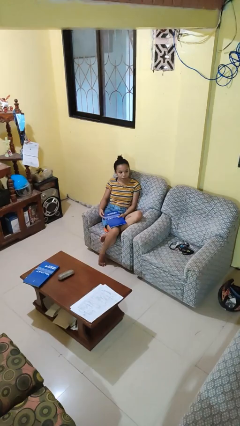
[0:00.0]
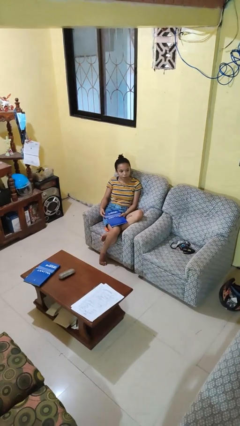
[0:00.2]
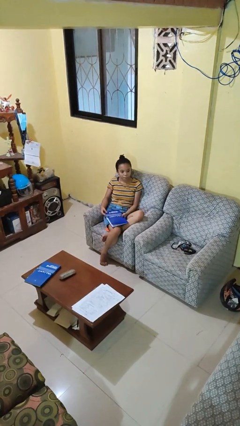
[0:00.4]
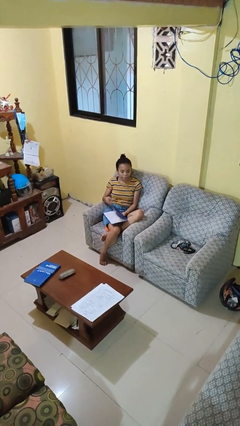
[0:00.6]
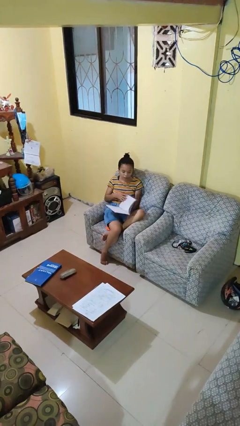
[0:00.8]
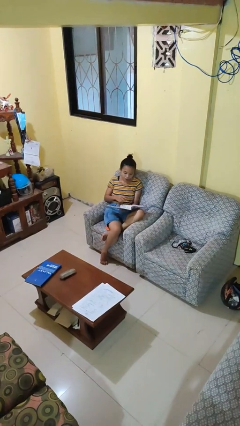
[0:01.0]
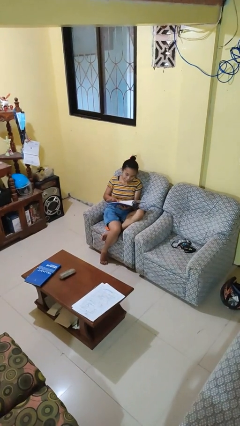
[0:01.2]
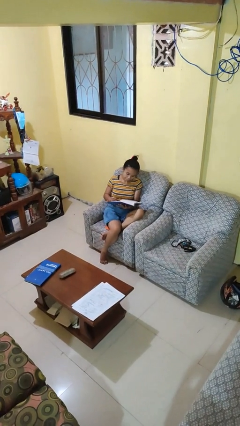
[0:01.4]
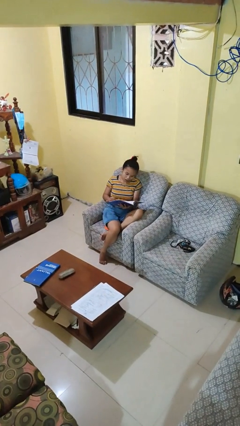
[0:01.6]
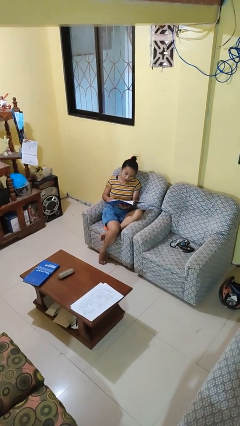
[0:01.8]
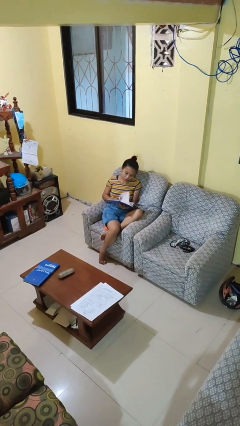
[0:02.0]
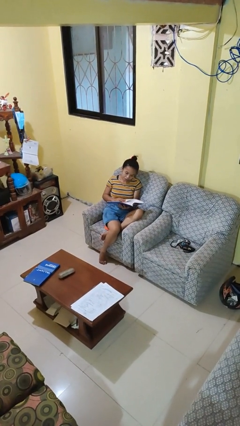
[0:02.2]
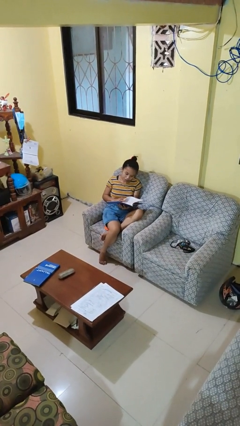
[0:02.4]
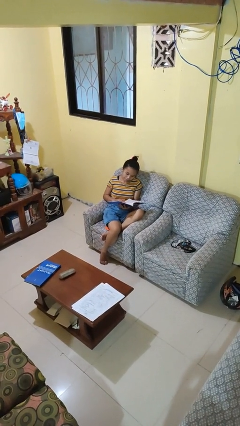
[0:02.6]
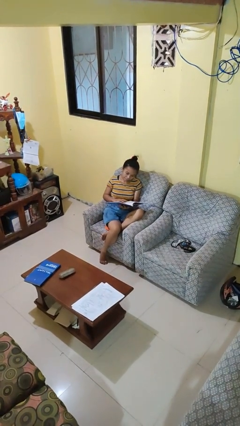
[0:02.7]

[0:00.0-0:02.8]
person reads book

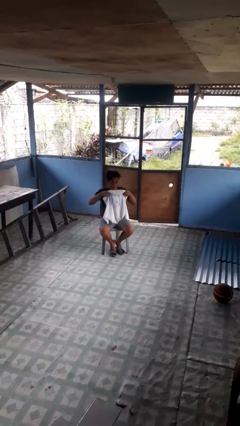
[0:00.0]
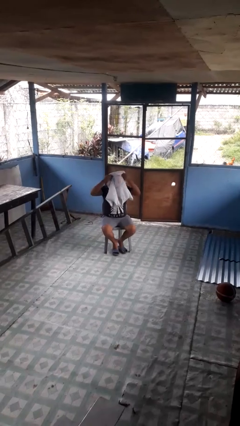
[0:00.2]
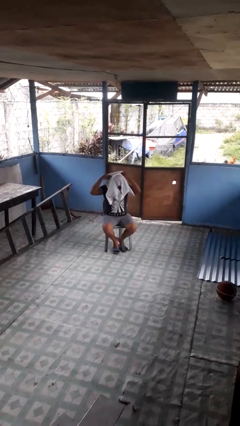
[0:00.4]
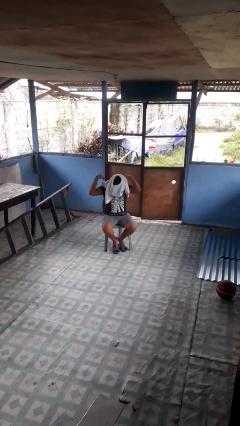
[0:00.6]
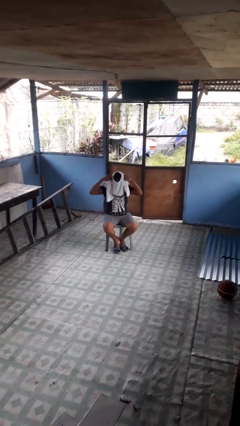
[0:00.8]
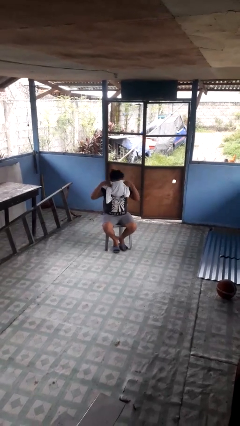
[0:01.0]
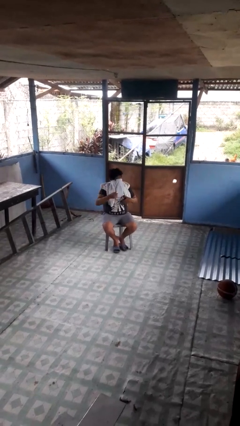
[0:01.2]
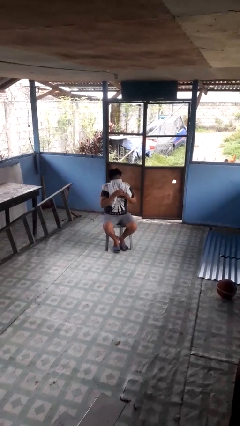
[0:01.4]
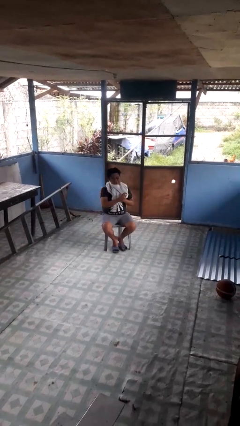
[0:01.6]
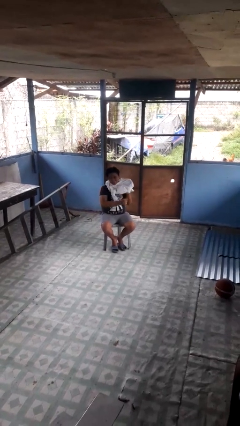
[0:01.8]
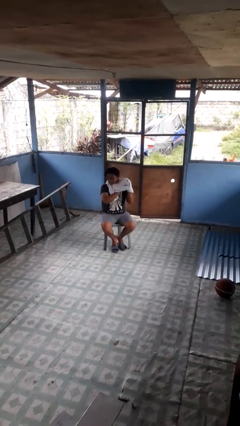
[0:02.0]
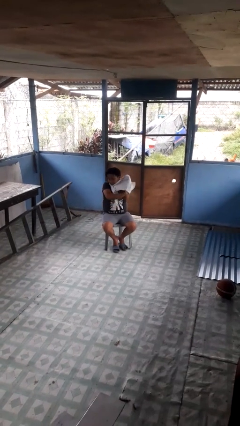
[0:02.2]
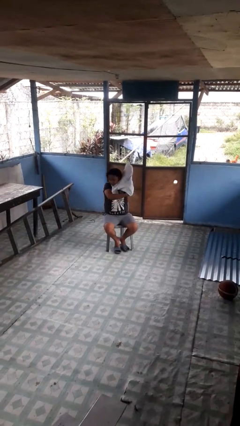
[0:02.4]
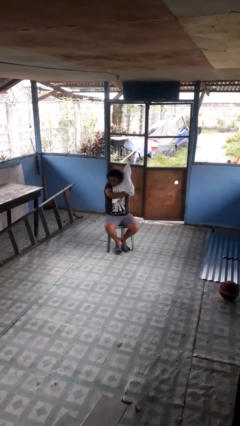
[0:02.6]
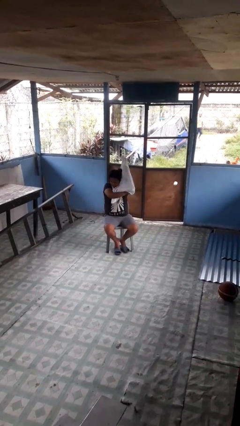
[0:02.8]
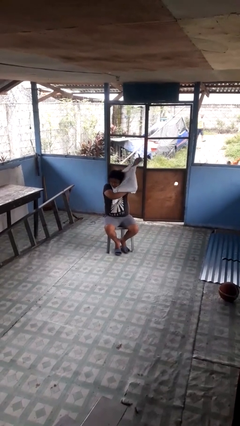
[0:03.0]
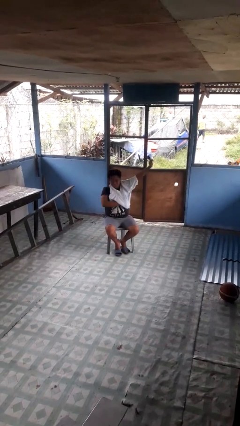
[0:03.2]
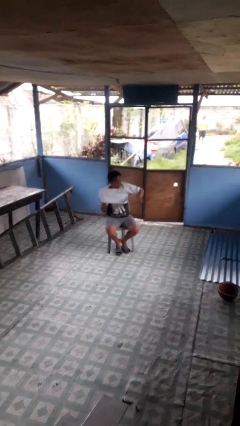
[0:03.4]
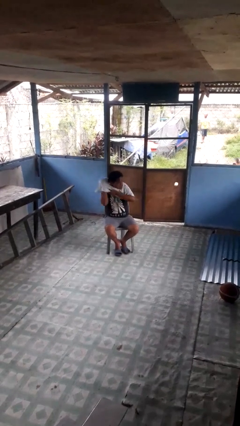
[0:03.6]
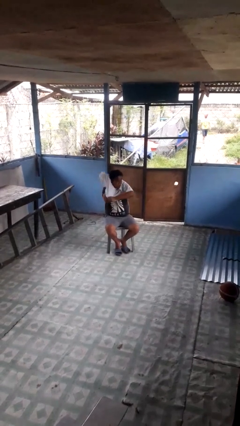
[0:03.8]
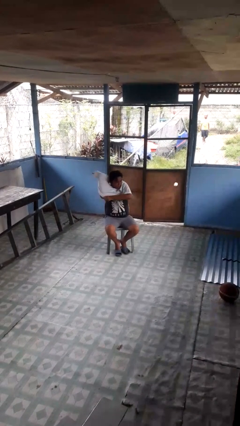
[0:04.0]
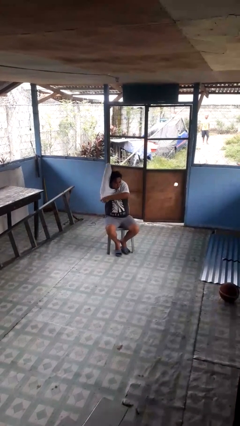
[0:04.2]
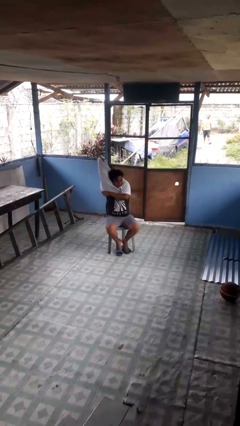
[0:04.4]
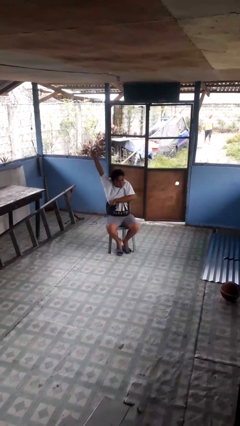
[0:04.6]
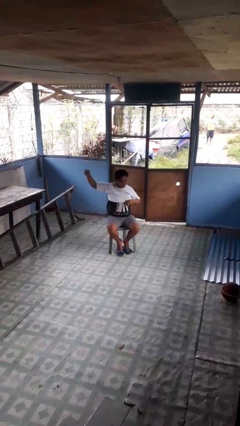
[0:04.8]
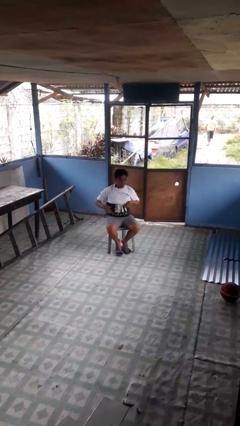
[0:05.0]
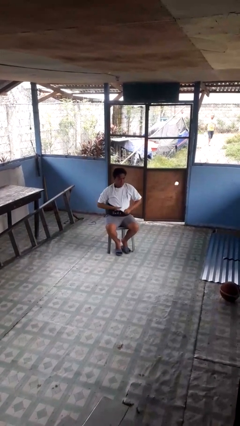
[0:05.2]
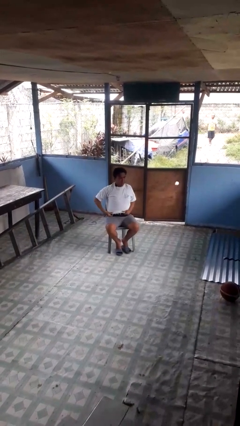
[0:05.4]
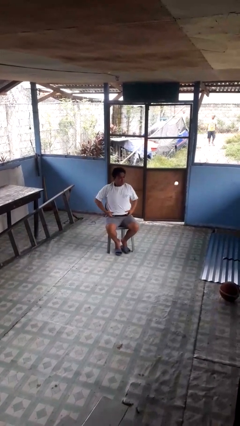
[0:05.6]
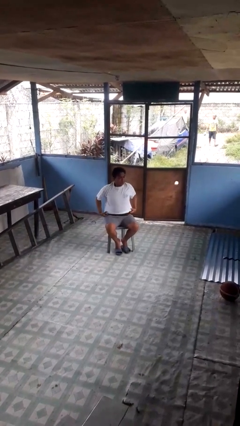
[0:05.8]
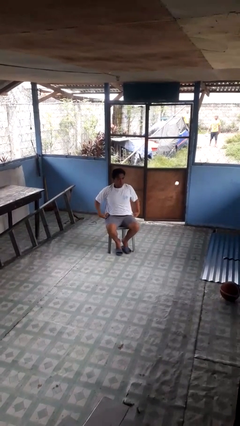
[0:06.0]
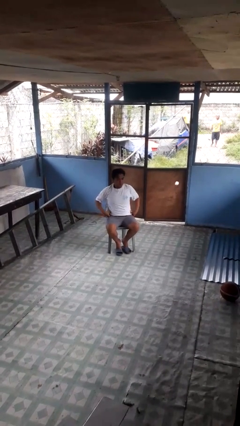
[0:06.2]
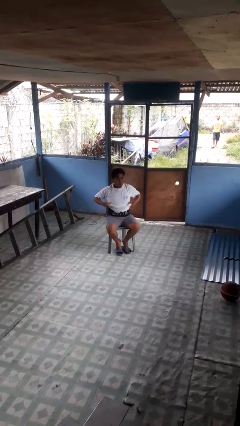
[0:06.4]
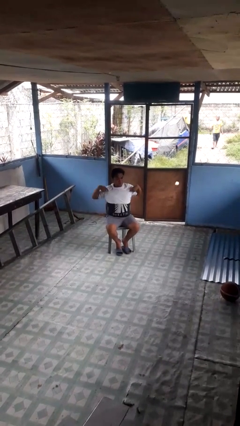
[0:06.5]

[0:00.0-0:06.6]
person puts on shirt

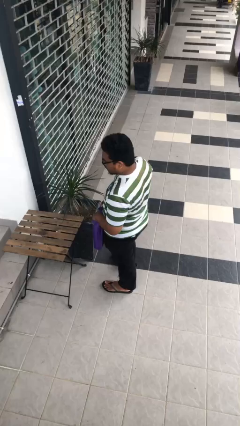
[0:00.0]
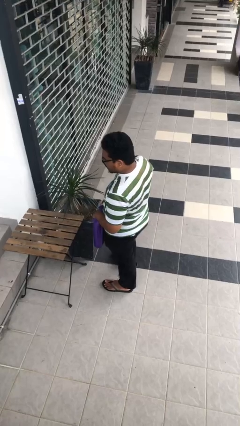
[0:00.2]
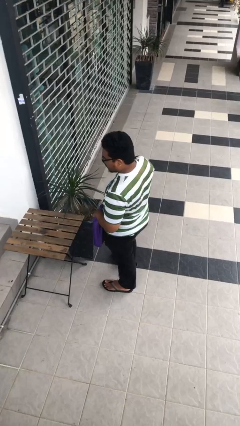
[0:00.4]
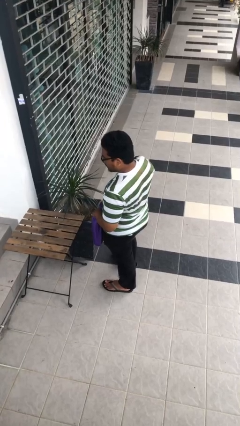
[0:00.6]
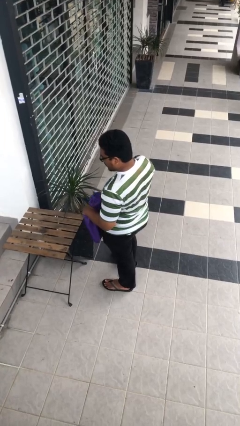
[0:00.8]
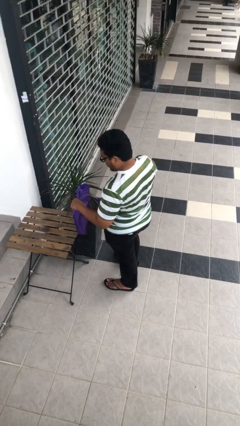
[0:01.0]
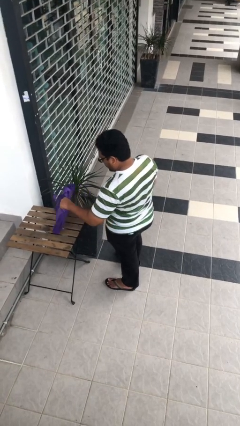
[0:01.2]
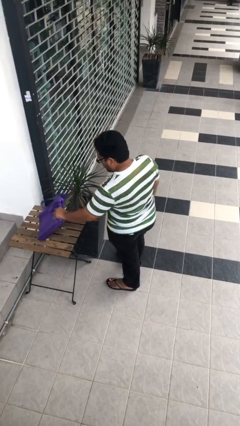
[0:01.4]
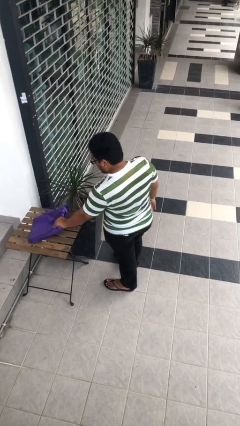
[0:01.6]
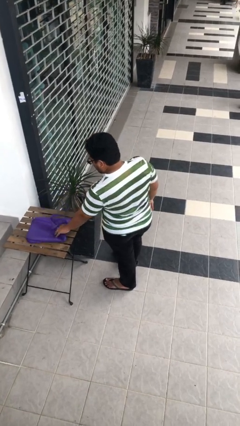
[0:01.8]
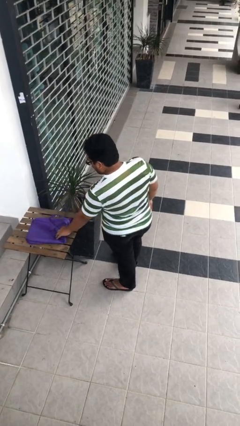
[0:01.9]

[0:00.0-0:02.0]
person puts down object on table

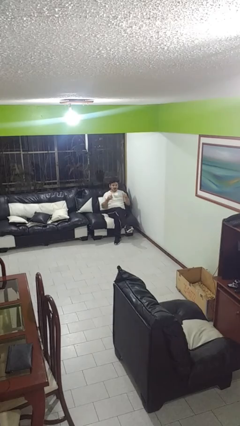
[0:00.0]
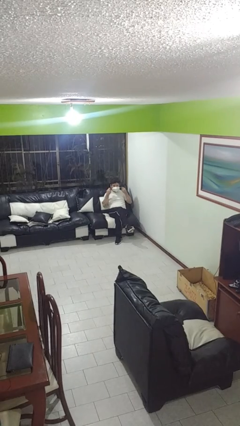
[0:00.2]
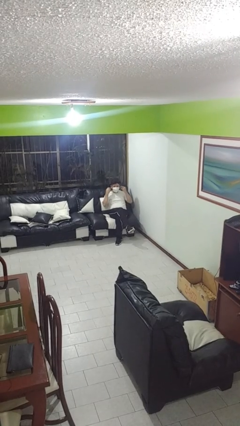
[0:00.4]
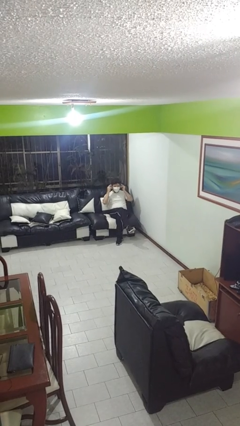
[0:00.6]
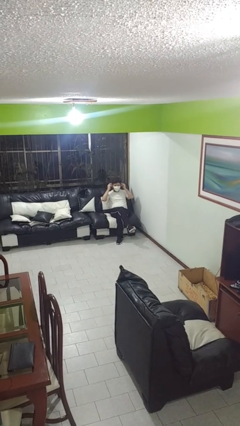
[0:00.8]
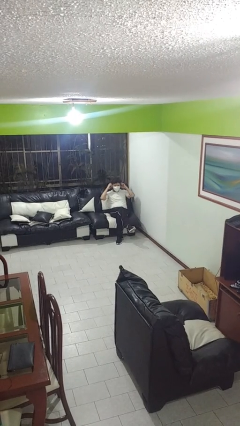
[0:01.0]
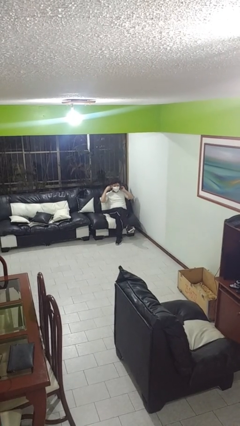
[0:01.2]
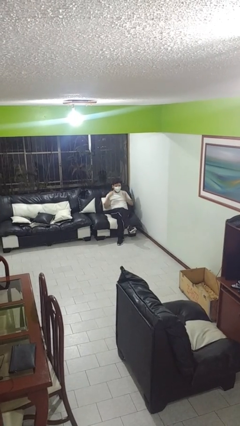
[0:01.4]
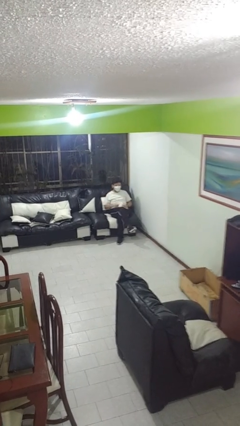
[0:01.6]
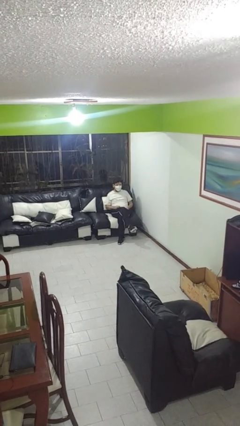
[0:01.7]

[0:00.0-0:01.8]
person puts on facemask

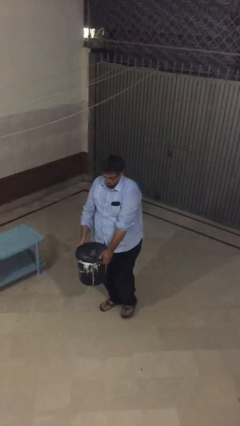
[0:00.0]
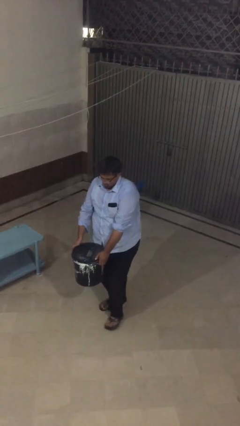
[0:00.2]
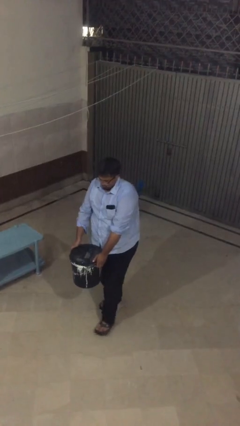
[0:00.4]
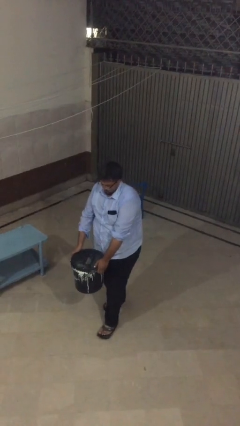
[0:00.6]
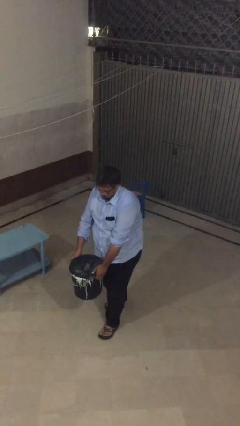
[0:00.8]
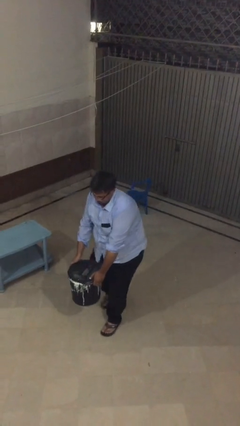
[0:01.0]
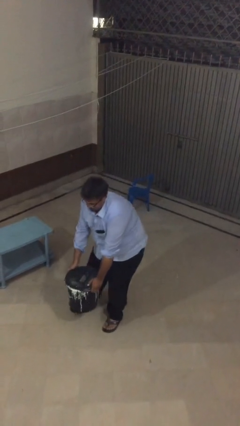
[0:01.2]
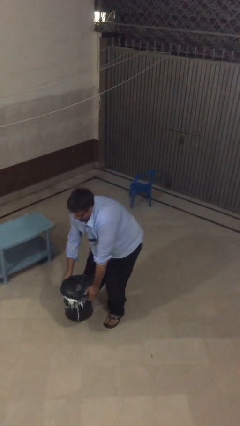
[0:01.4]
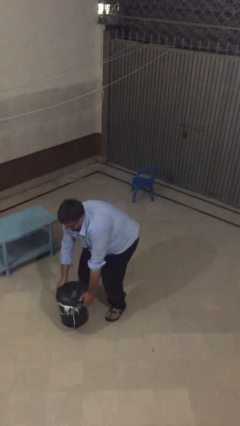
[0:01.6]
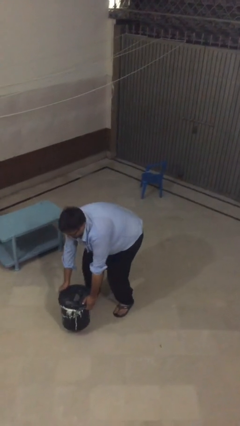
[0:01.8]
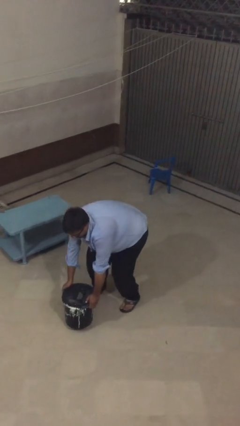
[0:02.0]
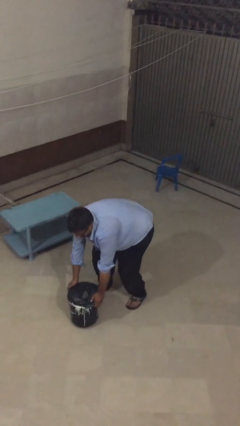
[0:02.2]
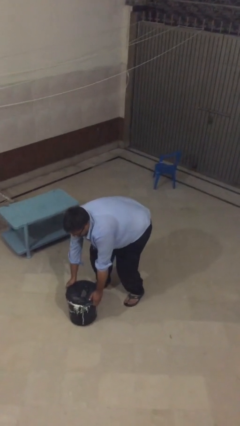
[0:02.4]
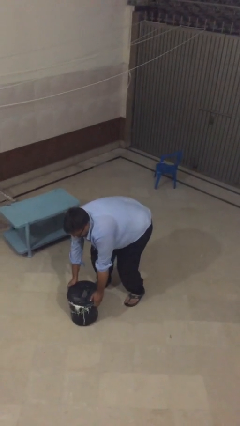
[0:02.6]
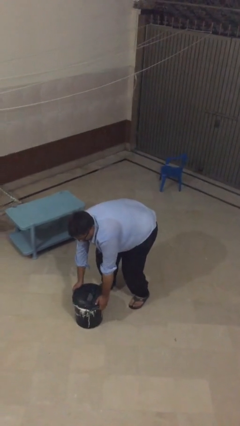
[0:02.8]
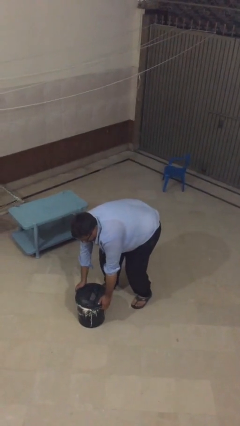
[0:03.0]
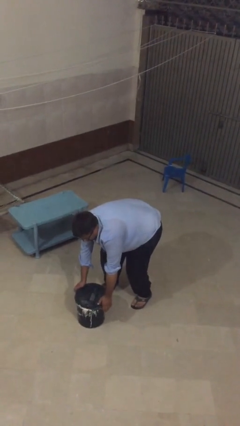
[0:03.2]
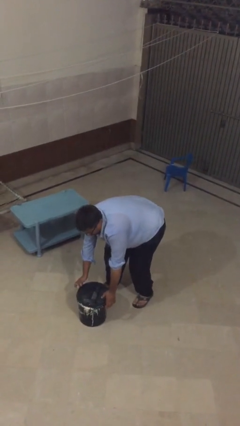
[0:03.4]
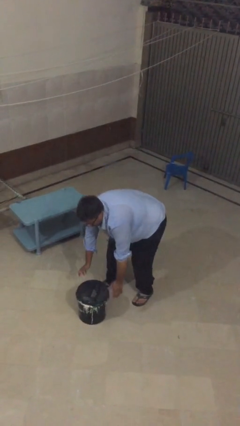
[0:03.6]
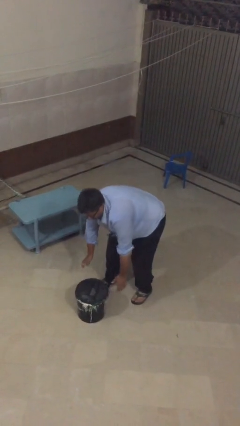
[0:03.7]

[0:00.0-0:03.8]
person puts down object on floor

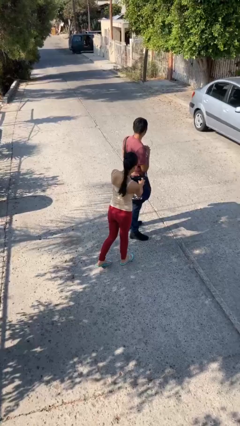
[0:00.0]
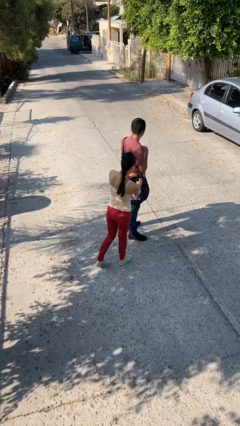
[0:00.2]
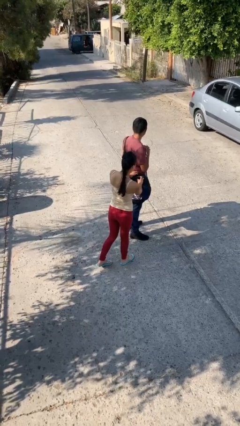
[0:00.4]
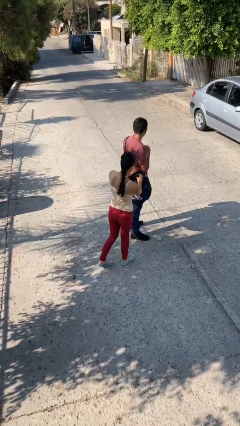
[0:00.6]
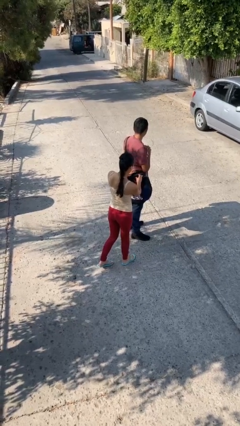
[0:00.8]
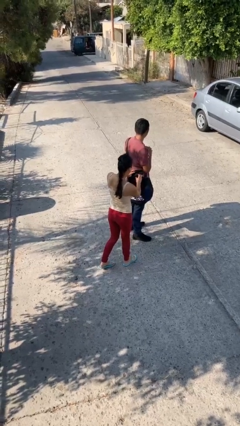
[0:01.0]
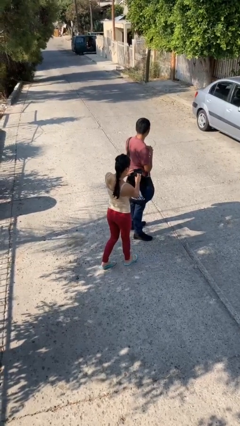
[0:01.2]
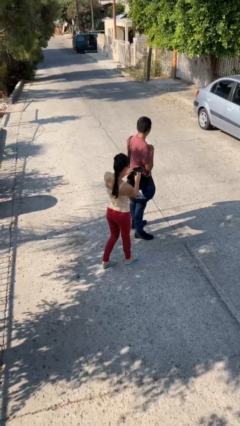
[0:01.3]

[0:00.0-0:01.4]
person steals object from person
